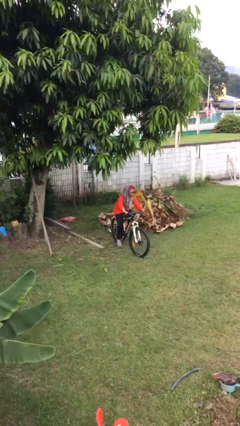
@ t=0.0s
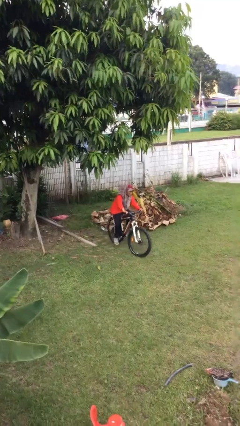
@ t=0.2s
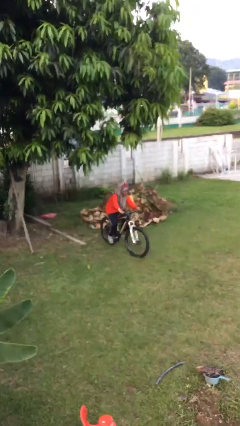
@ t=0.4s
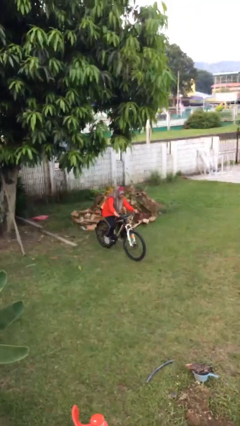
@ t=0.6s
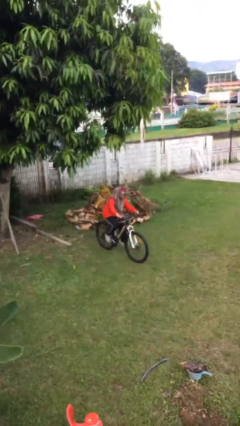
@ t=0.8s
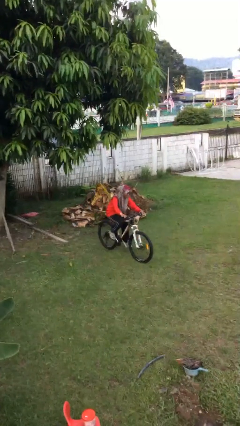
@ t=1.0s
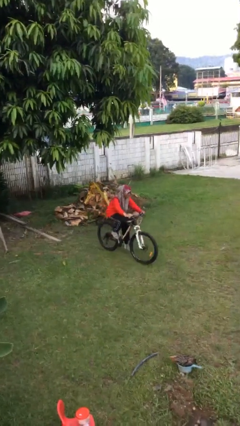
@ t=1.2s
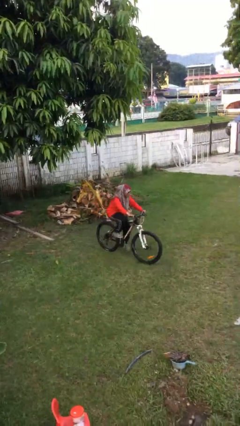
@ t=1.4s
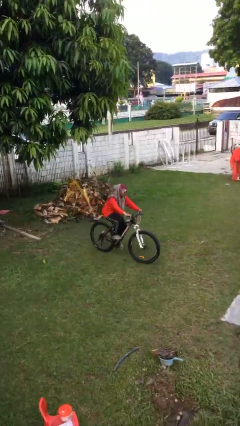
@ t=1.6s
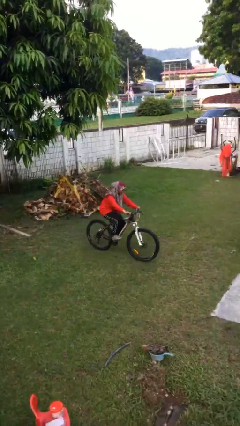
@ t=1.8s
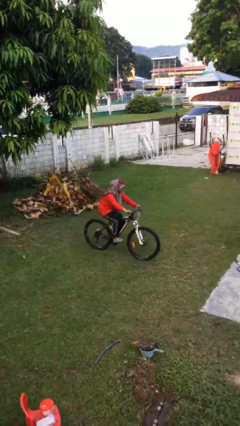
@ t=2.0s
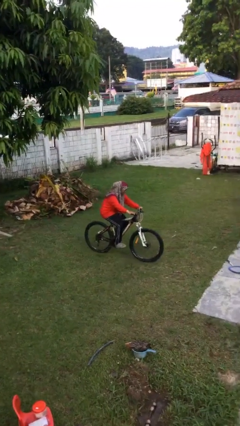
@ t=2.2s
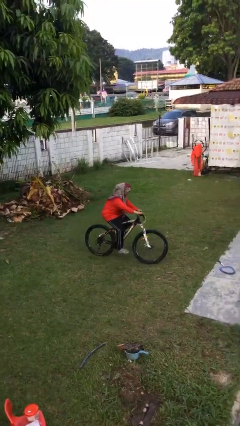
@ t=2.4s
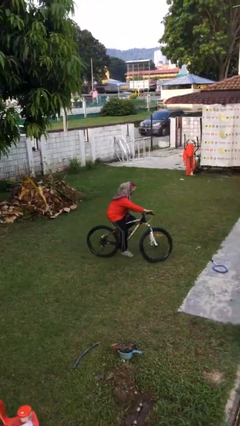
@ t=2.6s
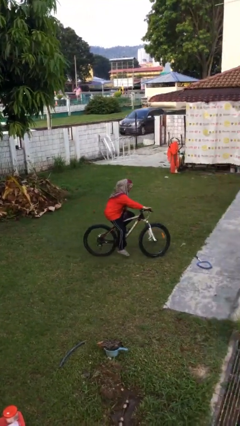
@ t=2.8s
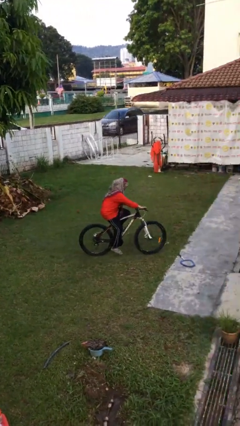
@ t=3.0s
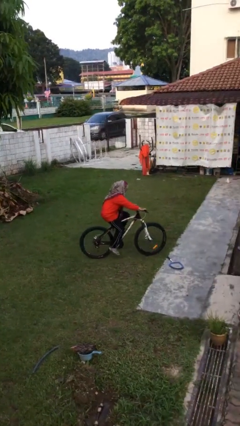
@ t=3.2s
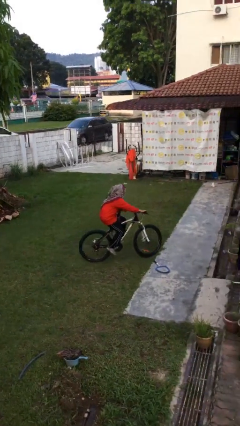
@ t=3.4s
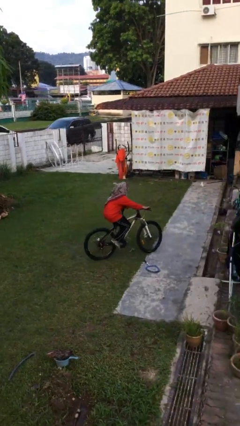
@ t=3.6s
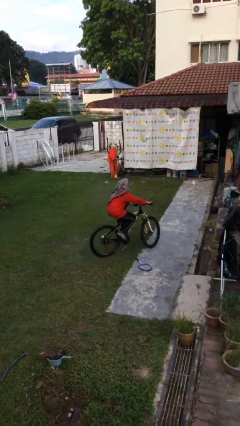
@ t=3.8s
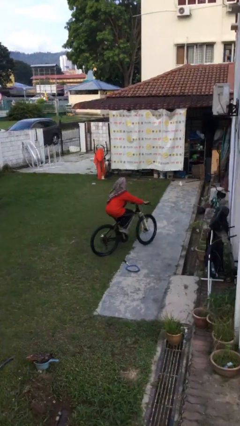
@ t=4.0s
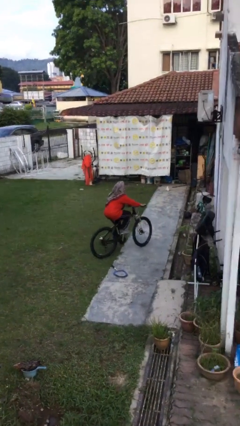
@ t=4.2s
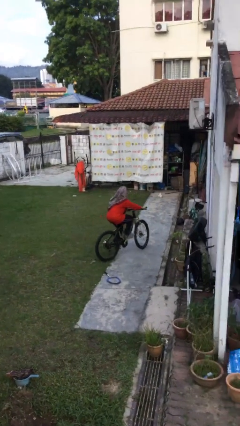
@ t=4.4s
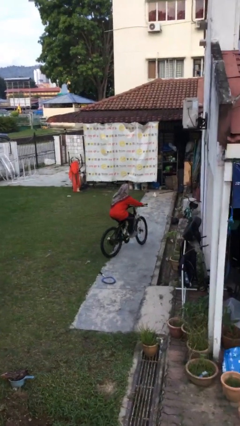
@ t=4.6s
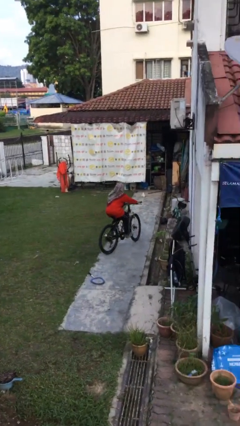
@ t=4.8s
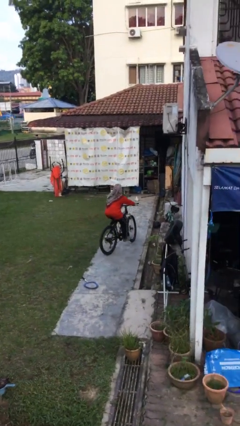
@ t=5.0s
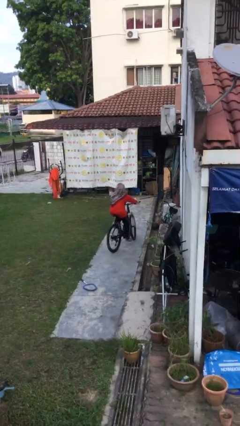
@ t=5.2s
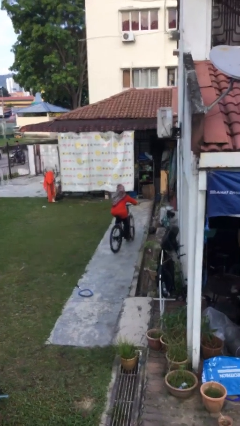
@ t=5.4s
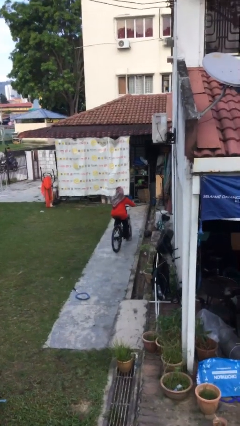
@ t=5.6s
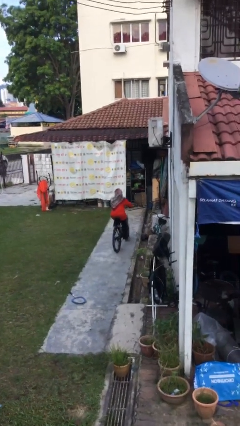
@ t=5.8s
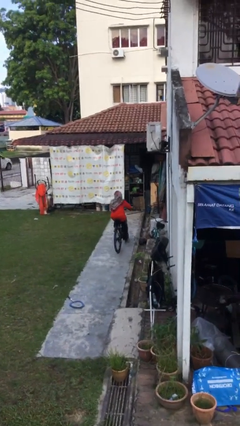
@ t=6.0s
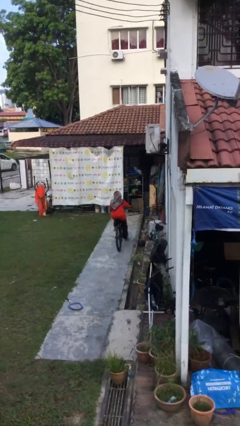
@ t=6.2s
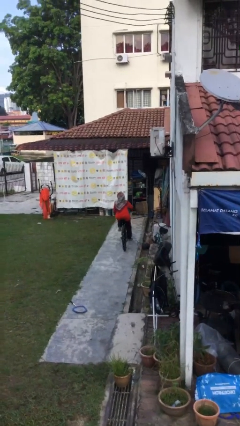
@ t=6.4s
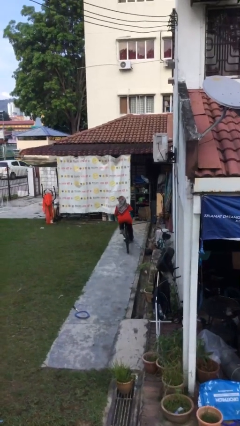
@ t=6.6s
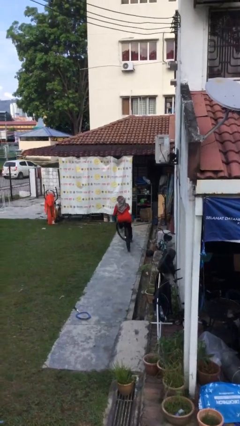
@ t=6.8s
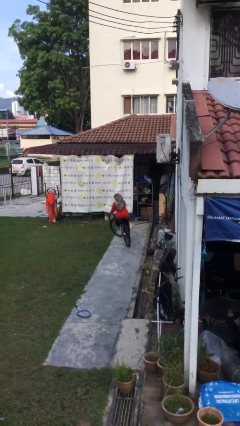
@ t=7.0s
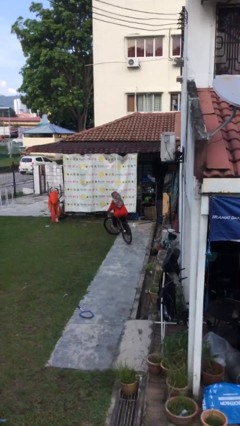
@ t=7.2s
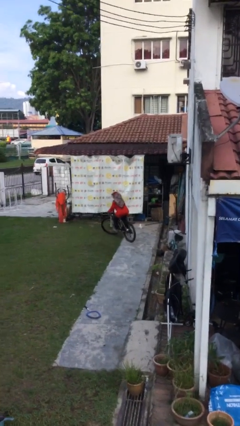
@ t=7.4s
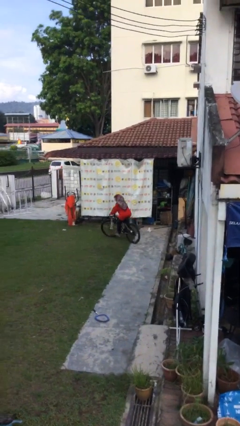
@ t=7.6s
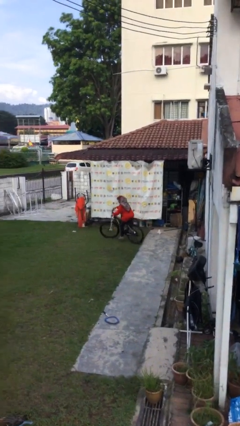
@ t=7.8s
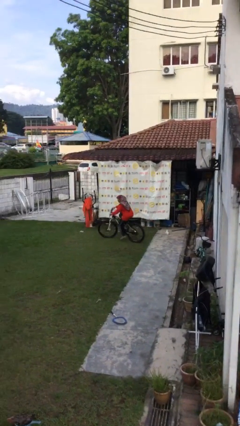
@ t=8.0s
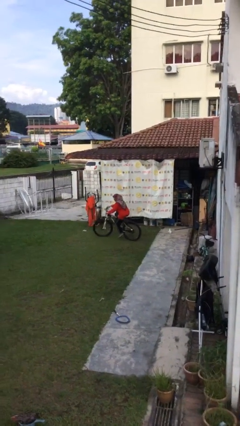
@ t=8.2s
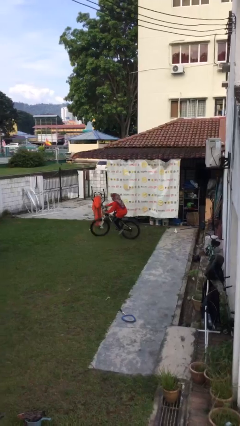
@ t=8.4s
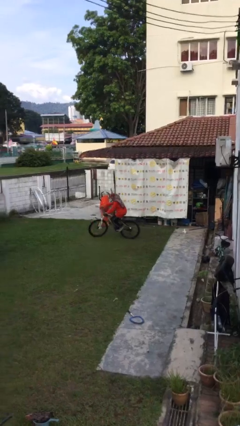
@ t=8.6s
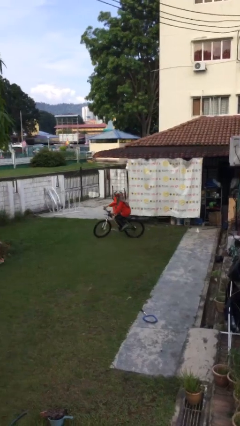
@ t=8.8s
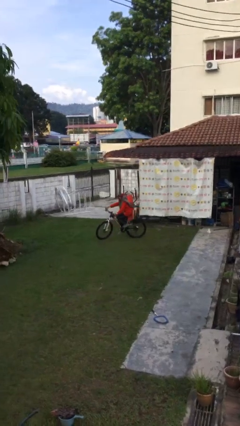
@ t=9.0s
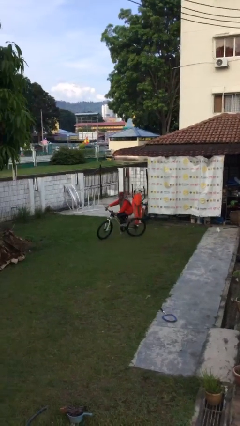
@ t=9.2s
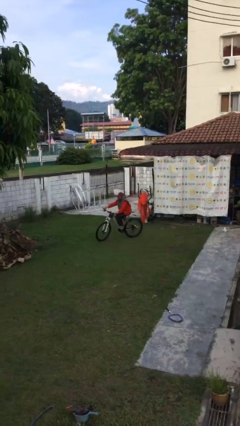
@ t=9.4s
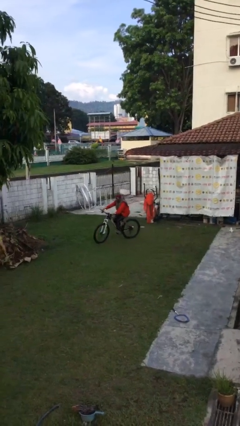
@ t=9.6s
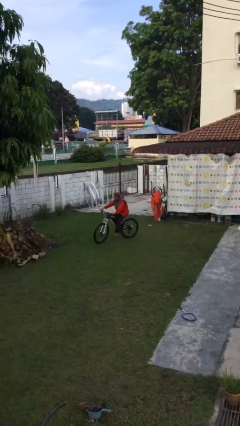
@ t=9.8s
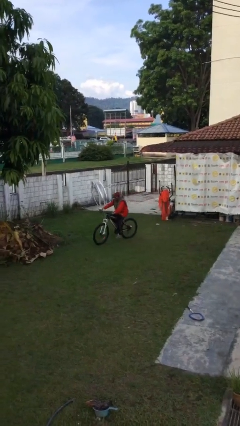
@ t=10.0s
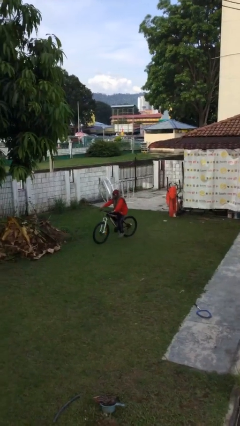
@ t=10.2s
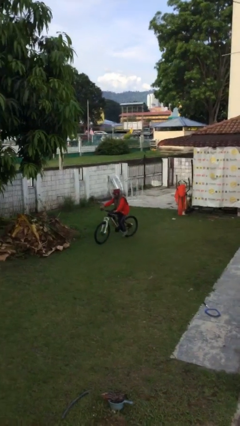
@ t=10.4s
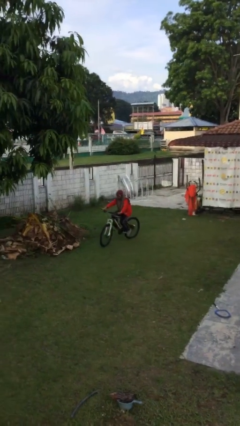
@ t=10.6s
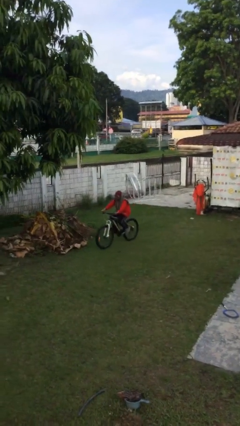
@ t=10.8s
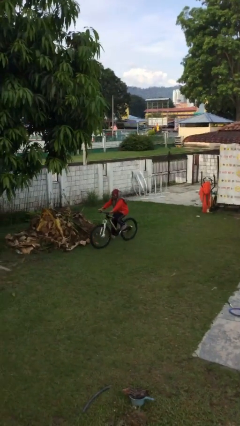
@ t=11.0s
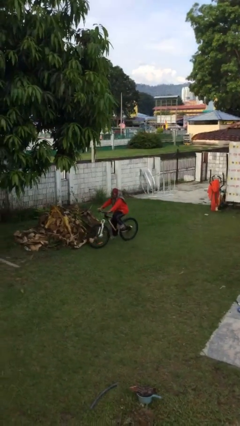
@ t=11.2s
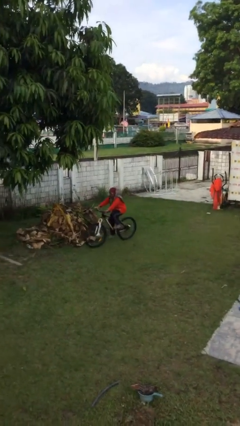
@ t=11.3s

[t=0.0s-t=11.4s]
person rides bicycle

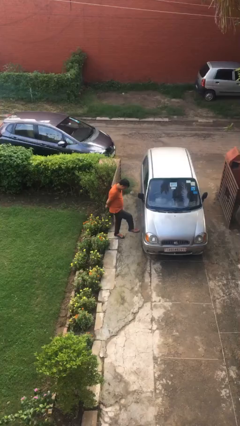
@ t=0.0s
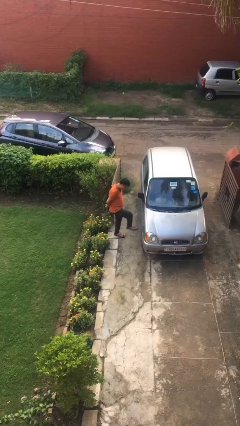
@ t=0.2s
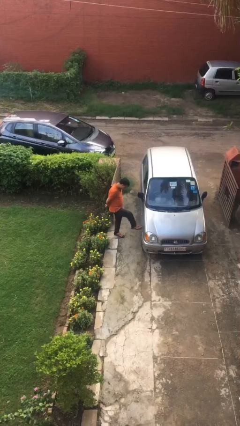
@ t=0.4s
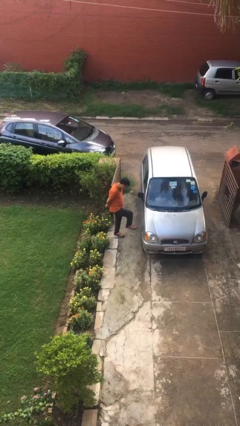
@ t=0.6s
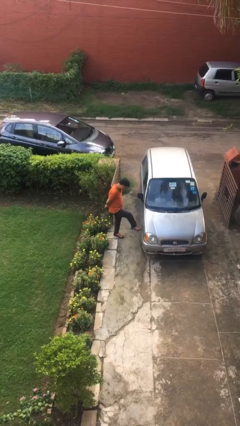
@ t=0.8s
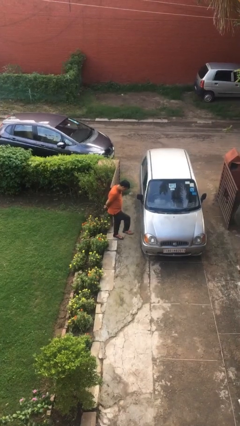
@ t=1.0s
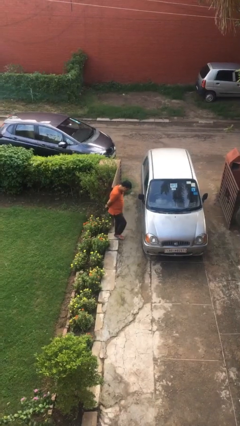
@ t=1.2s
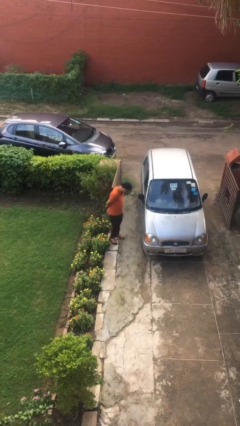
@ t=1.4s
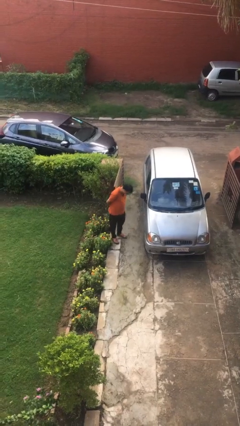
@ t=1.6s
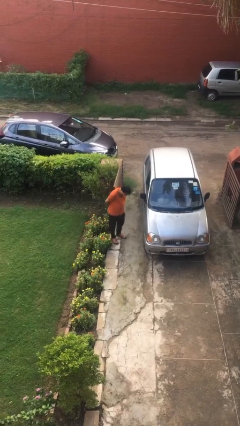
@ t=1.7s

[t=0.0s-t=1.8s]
person kicks car tires

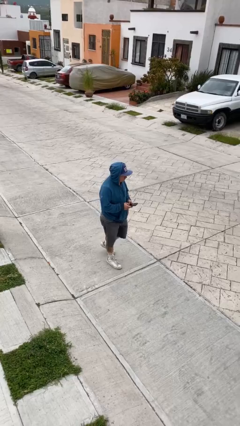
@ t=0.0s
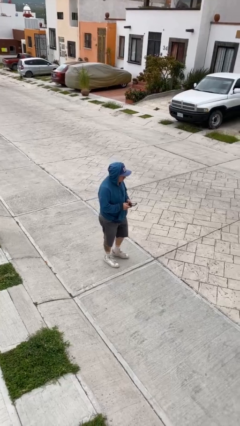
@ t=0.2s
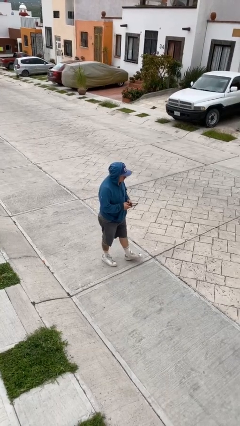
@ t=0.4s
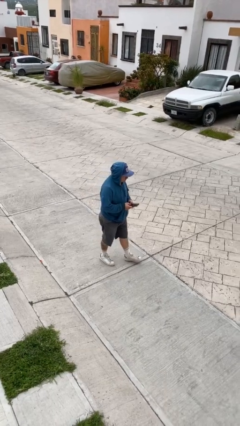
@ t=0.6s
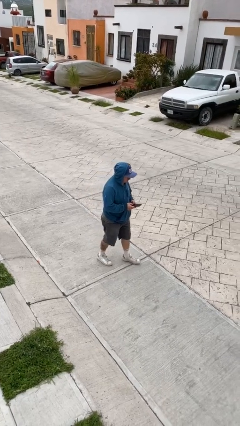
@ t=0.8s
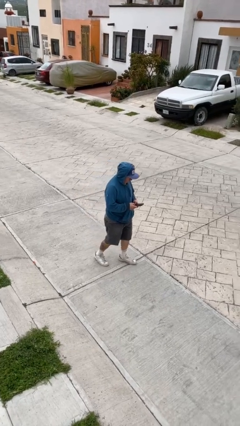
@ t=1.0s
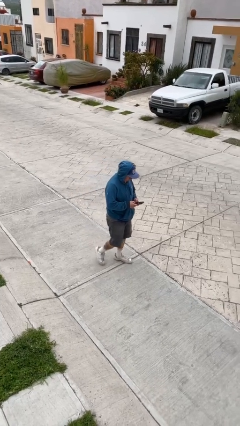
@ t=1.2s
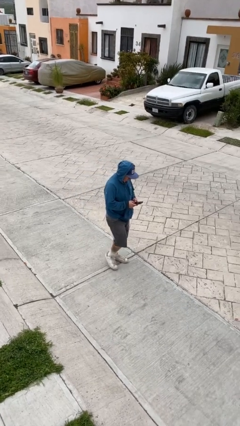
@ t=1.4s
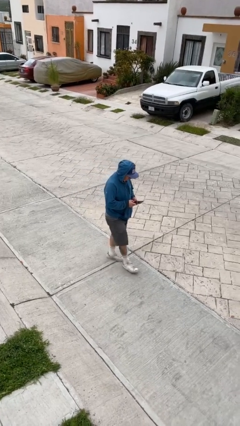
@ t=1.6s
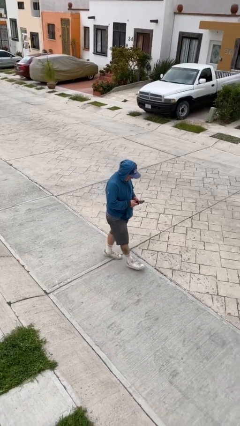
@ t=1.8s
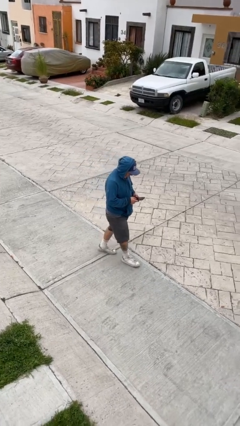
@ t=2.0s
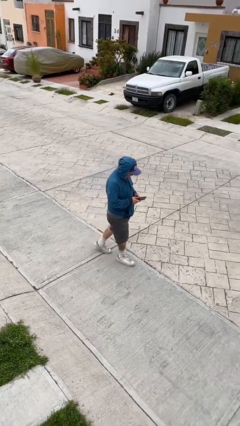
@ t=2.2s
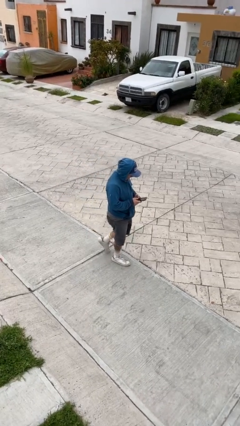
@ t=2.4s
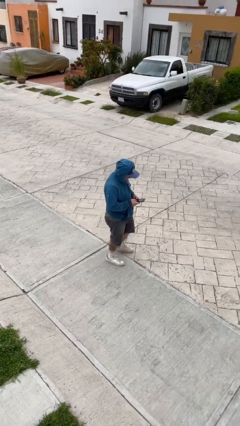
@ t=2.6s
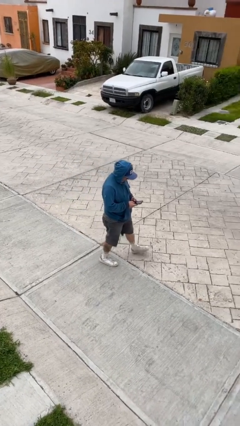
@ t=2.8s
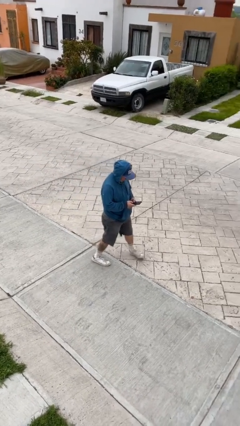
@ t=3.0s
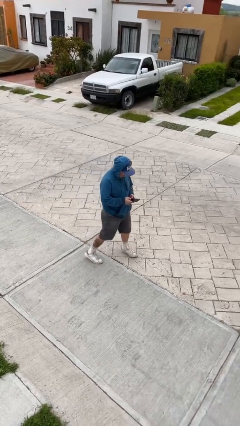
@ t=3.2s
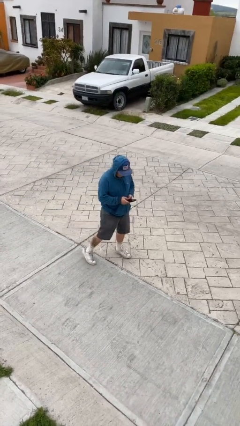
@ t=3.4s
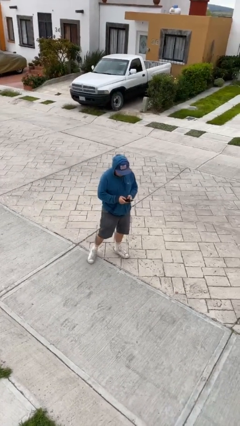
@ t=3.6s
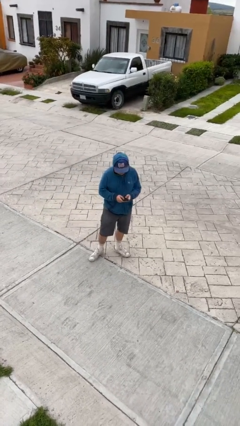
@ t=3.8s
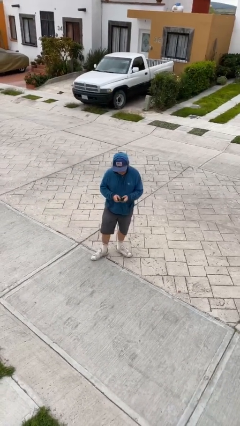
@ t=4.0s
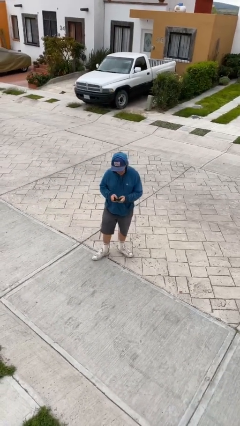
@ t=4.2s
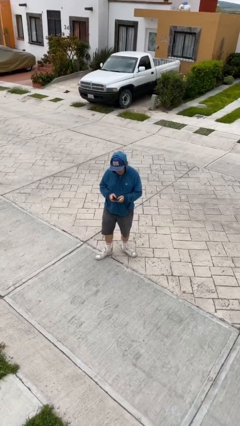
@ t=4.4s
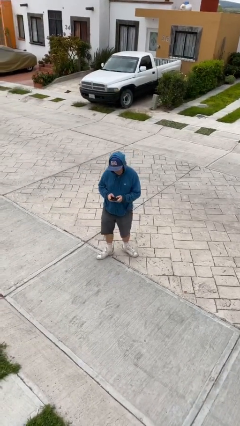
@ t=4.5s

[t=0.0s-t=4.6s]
person texts on phone
